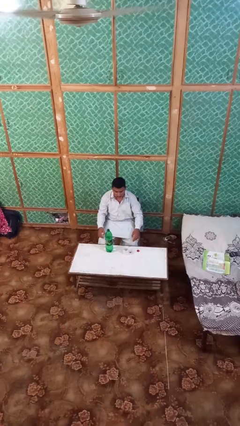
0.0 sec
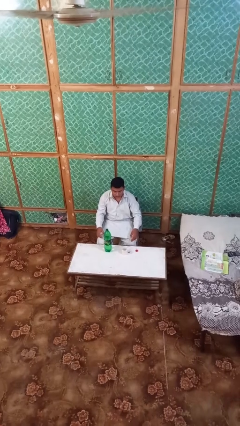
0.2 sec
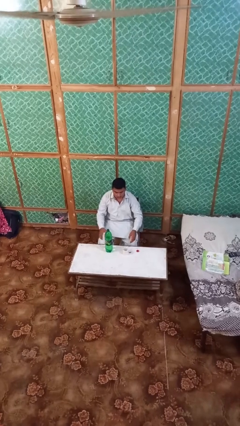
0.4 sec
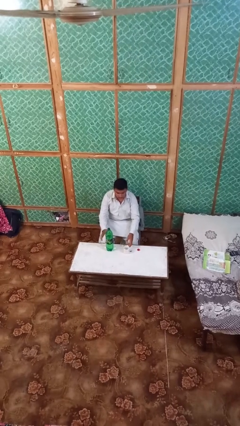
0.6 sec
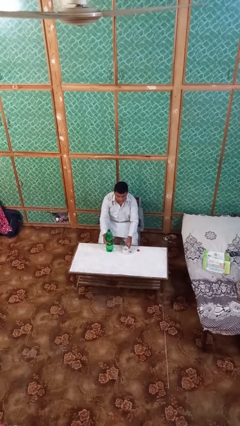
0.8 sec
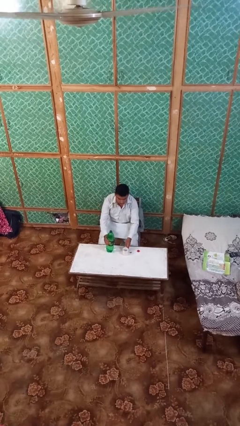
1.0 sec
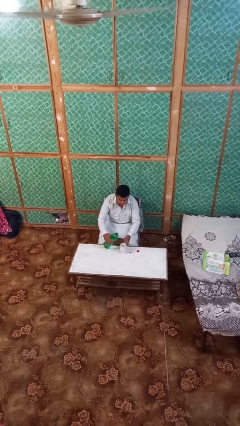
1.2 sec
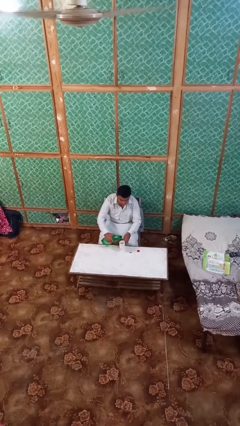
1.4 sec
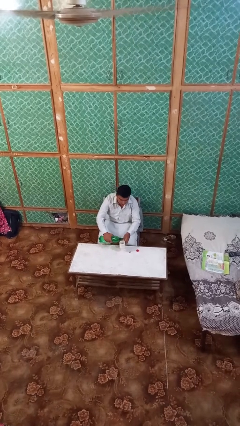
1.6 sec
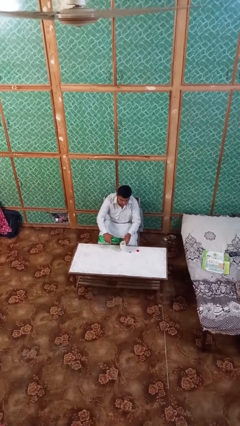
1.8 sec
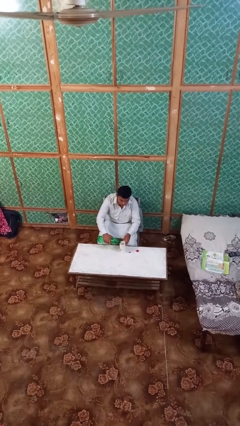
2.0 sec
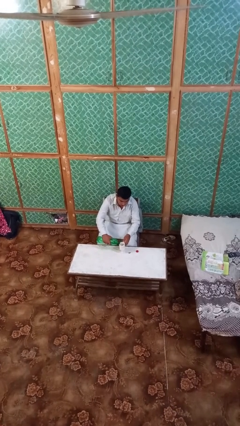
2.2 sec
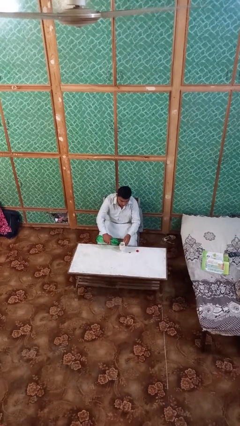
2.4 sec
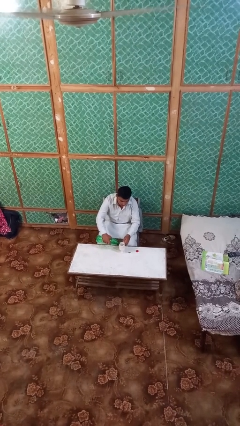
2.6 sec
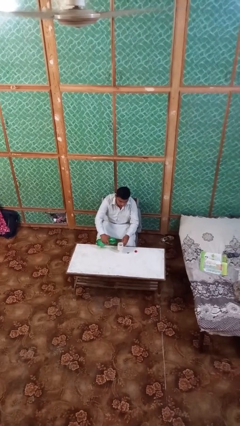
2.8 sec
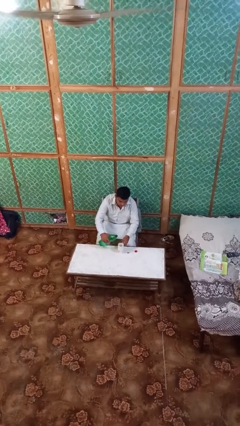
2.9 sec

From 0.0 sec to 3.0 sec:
person pours liquid into cup

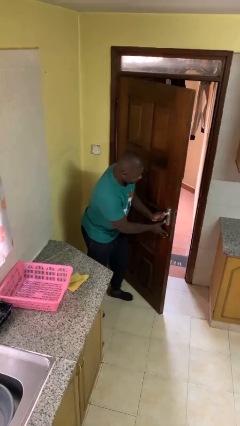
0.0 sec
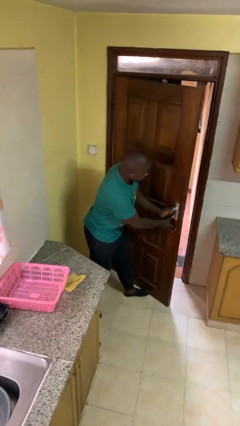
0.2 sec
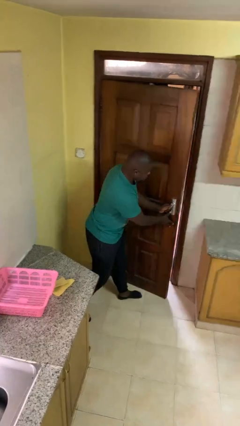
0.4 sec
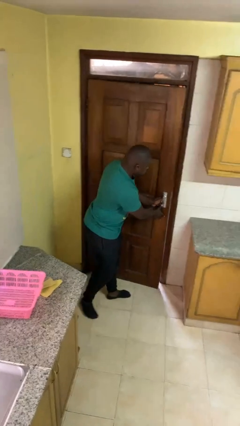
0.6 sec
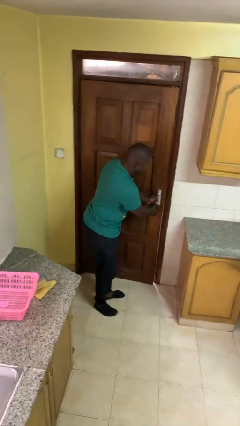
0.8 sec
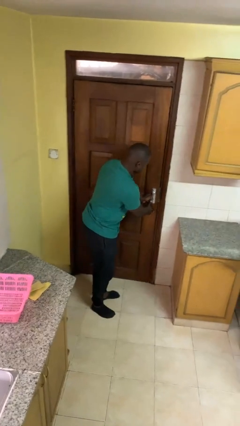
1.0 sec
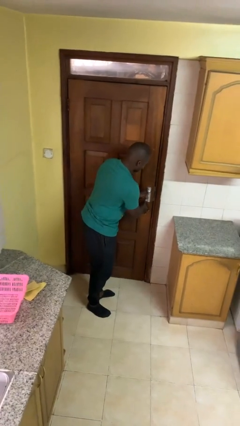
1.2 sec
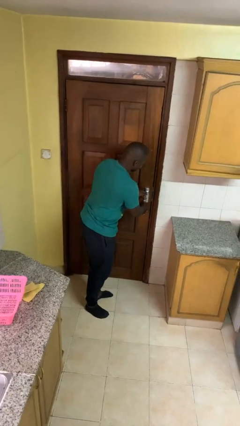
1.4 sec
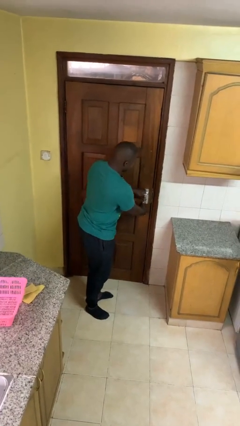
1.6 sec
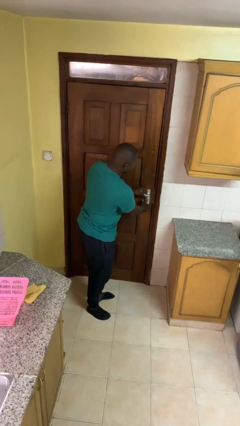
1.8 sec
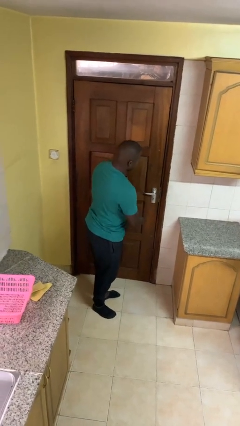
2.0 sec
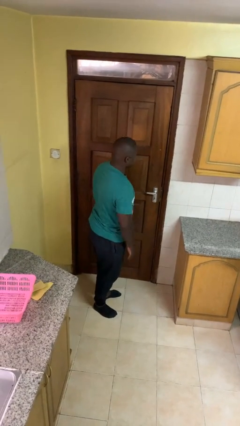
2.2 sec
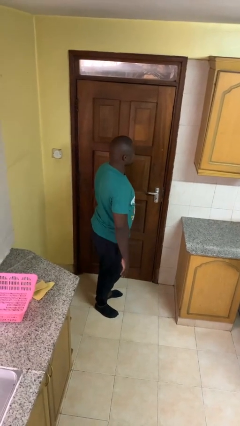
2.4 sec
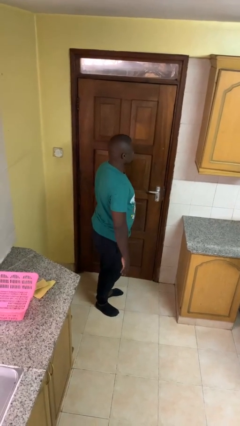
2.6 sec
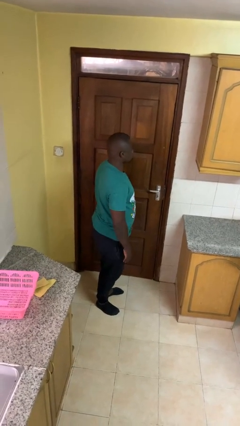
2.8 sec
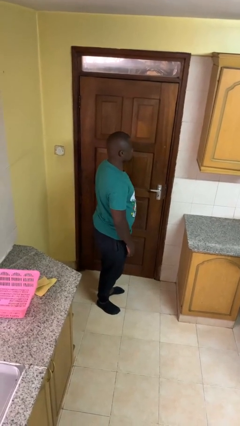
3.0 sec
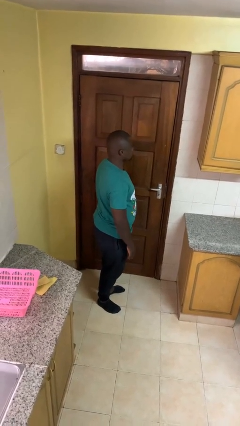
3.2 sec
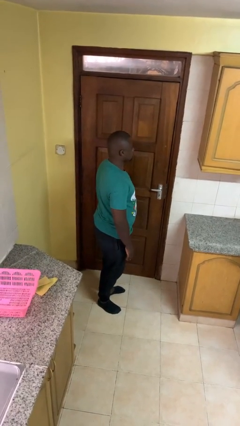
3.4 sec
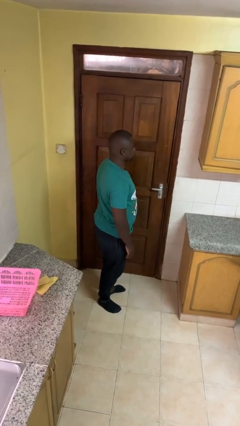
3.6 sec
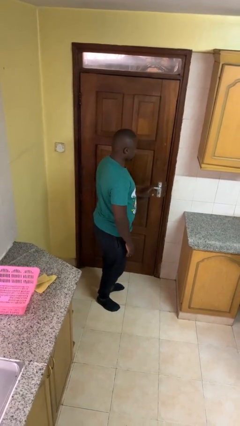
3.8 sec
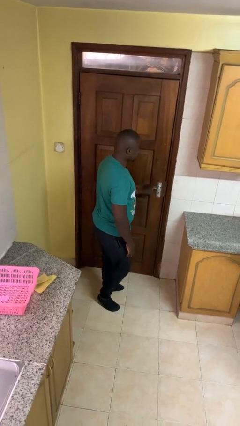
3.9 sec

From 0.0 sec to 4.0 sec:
person closes facility door

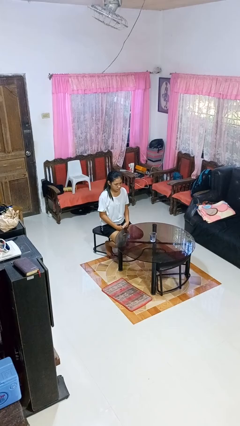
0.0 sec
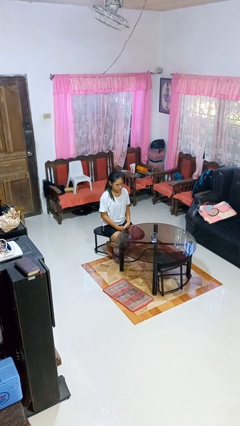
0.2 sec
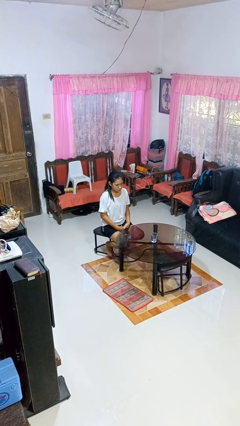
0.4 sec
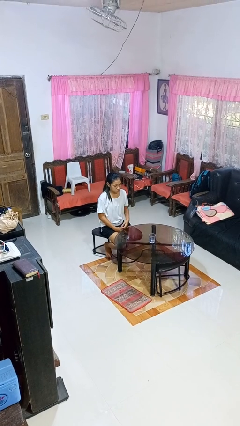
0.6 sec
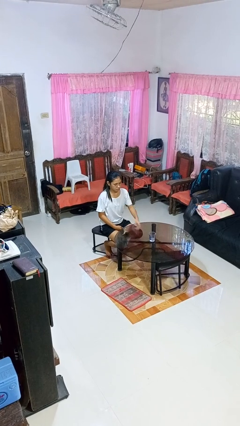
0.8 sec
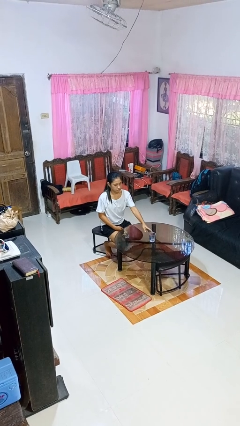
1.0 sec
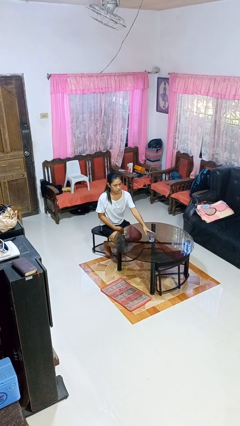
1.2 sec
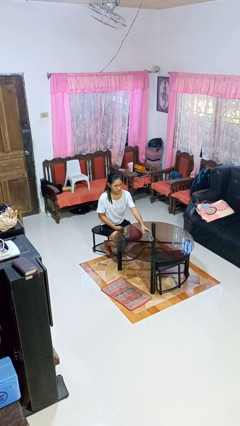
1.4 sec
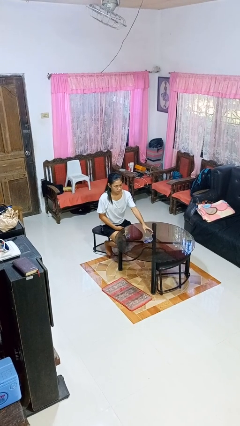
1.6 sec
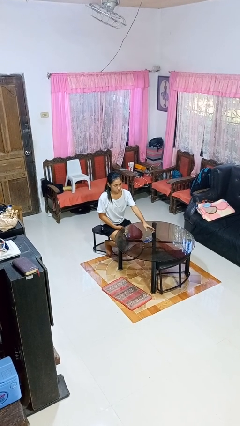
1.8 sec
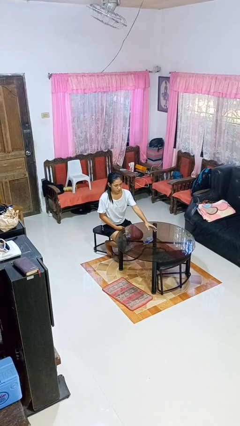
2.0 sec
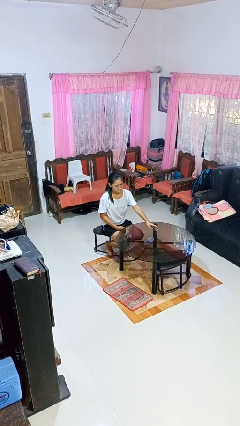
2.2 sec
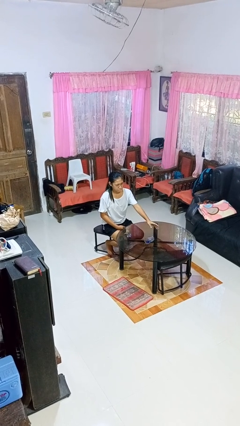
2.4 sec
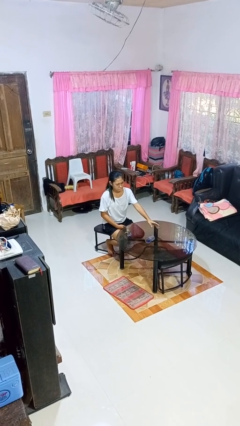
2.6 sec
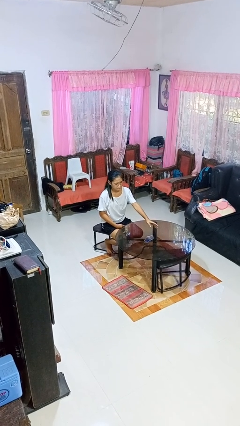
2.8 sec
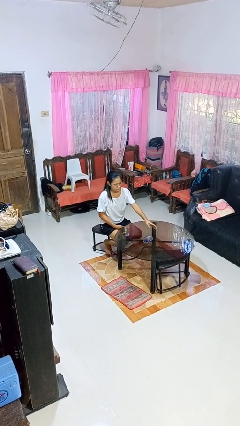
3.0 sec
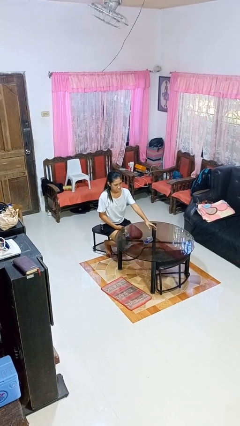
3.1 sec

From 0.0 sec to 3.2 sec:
person spills on table

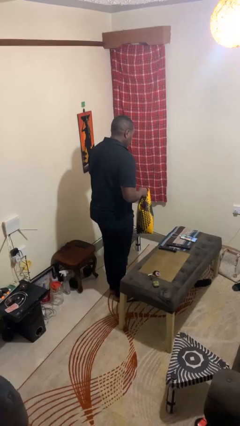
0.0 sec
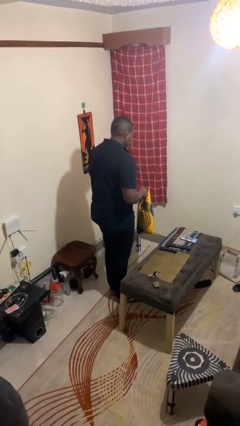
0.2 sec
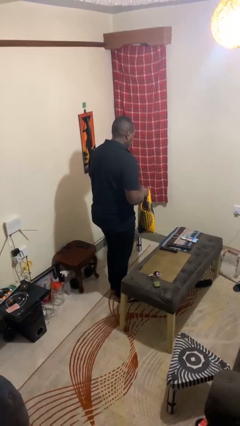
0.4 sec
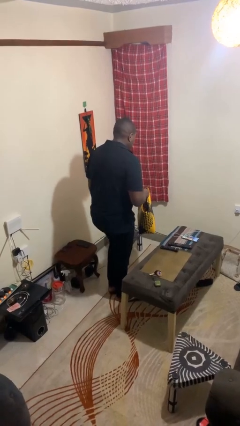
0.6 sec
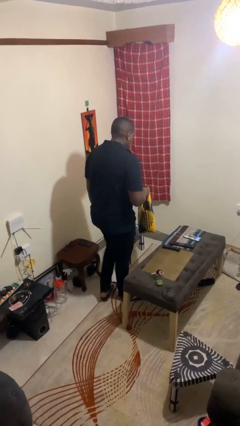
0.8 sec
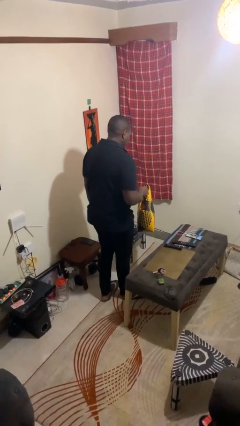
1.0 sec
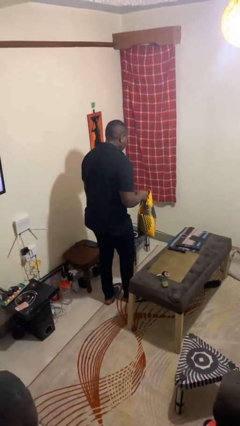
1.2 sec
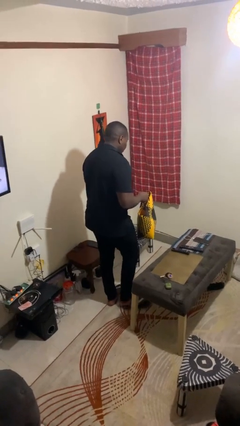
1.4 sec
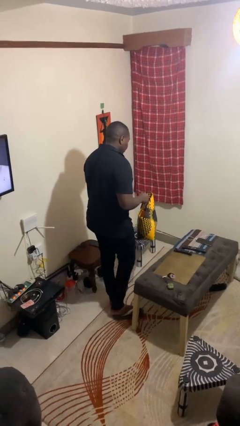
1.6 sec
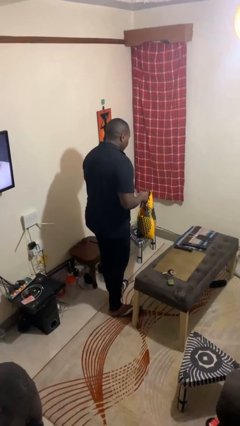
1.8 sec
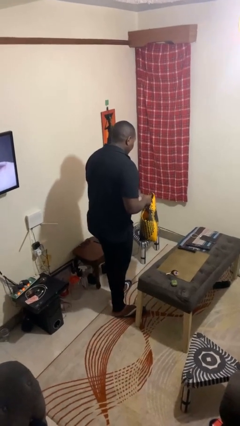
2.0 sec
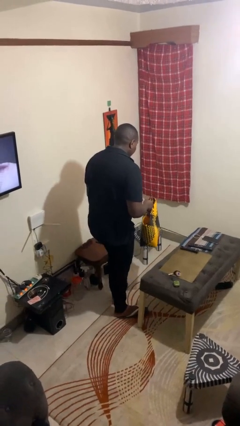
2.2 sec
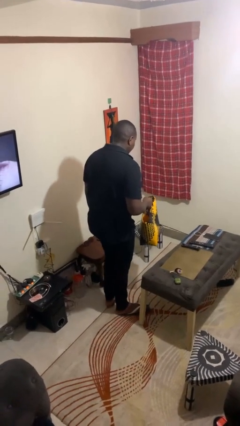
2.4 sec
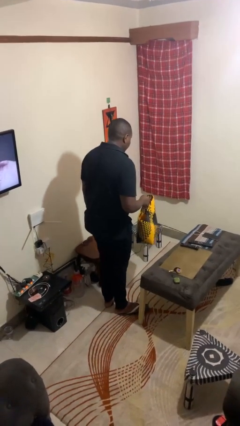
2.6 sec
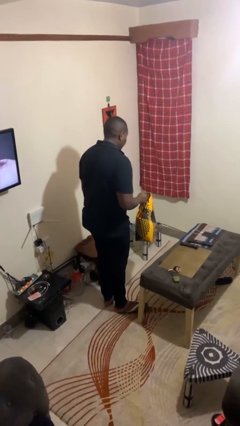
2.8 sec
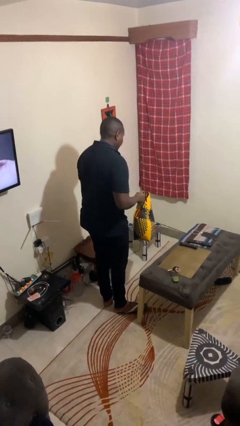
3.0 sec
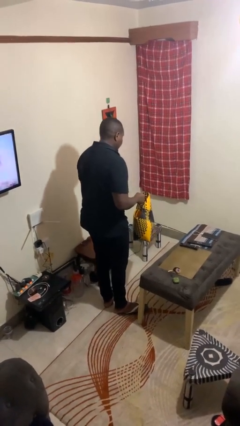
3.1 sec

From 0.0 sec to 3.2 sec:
person carries groceries

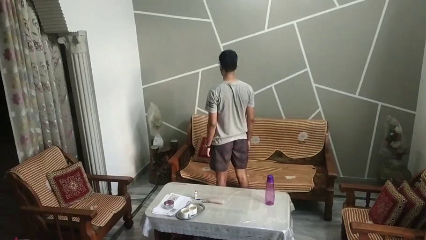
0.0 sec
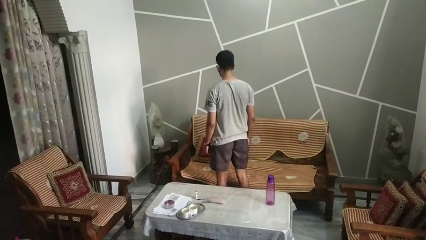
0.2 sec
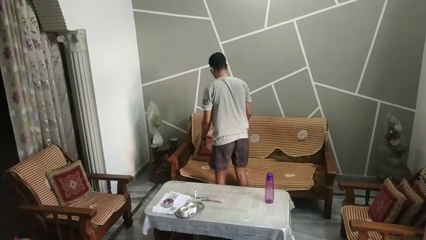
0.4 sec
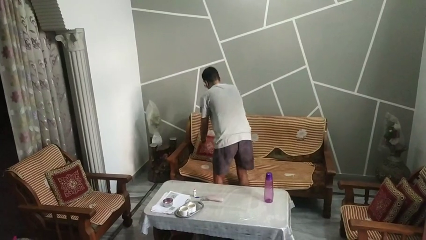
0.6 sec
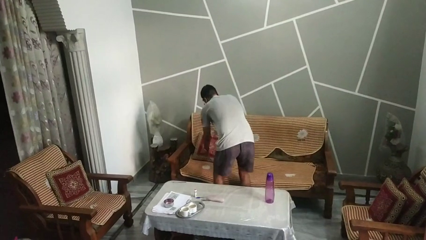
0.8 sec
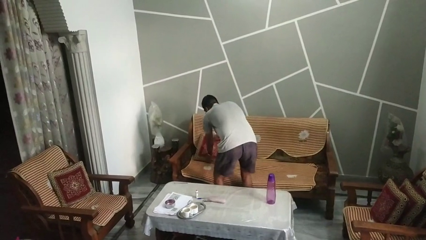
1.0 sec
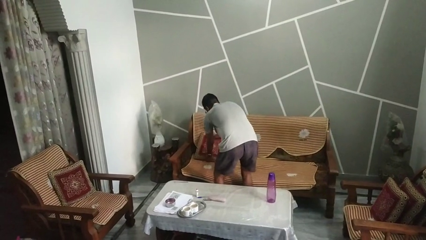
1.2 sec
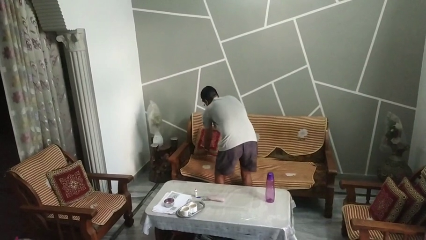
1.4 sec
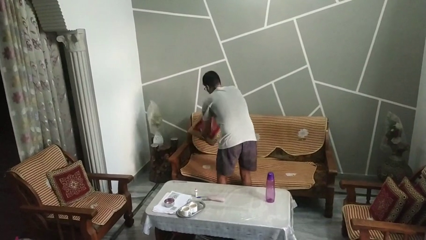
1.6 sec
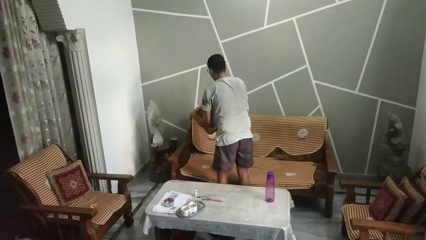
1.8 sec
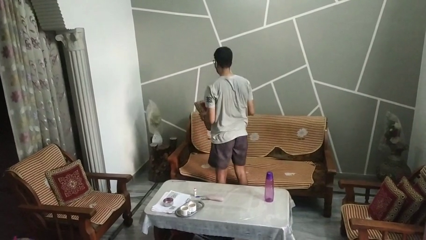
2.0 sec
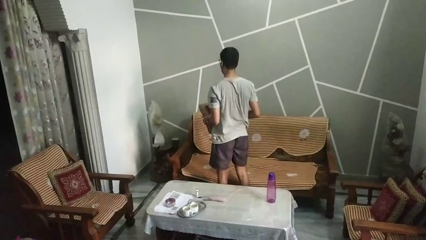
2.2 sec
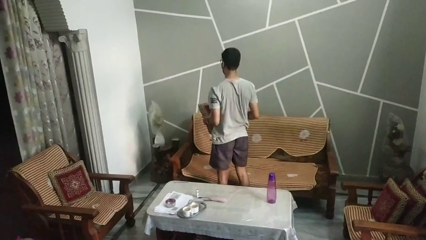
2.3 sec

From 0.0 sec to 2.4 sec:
person picks up object from couch

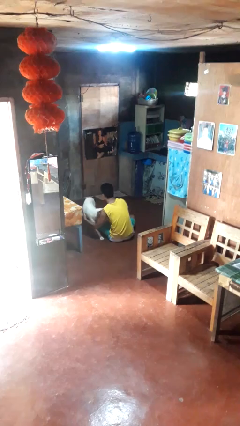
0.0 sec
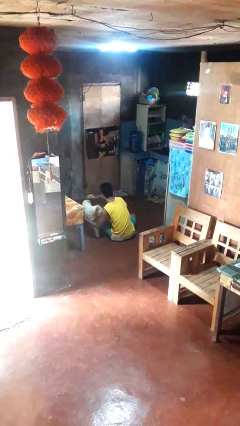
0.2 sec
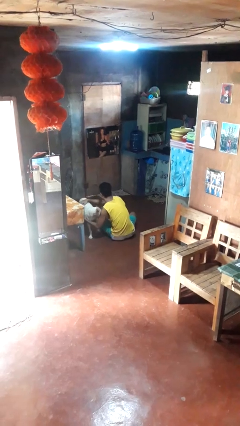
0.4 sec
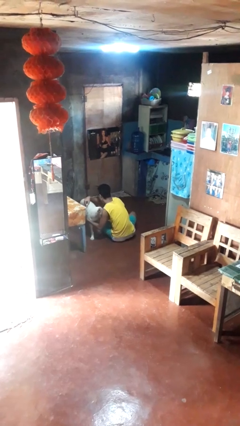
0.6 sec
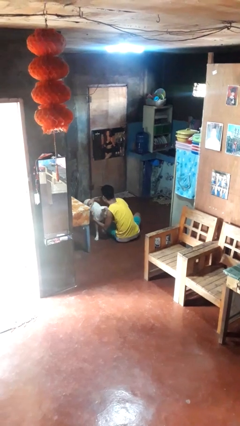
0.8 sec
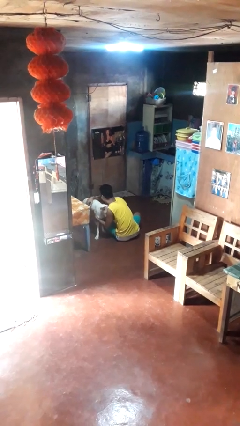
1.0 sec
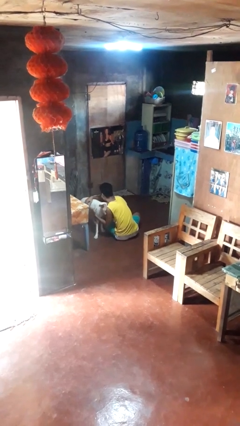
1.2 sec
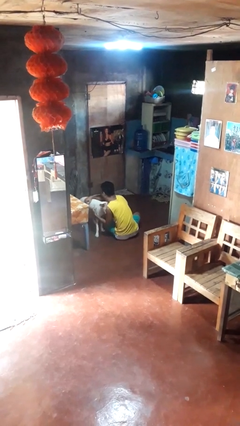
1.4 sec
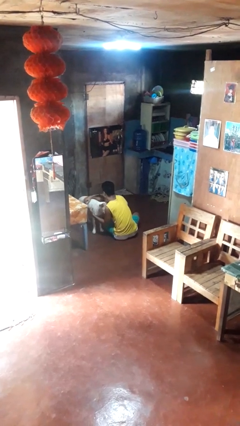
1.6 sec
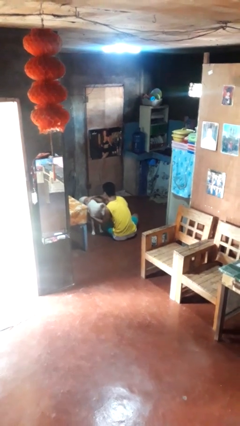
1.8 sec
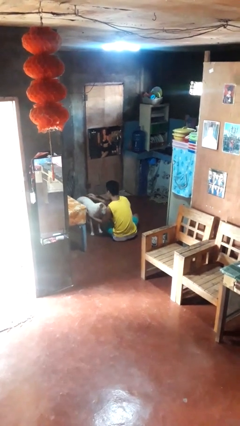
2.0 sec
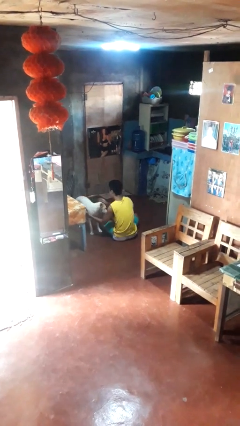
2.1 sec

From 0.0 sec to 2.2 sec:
person hugs dog
